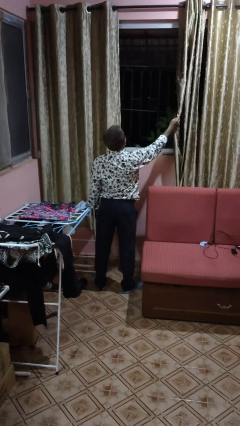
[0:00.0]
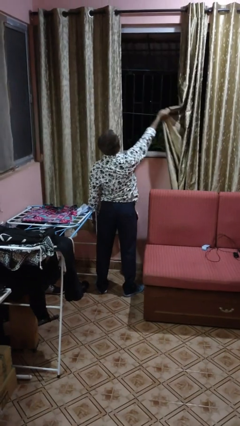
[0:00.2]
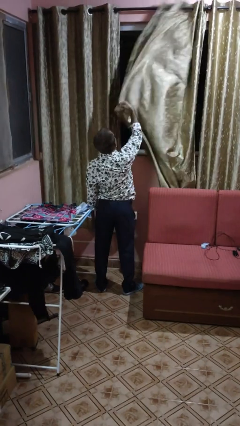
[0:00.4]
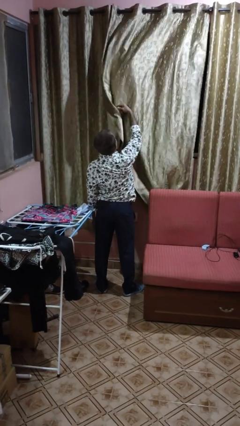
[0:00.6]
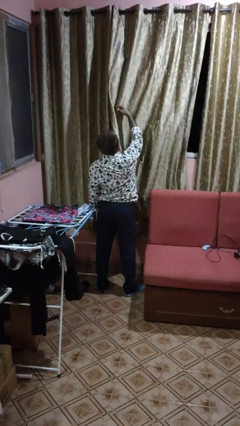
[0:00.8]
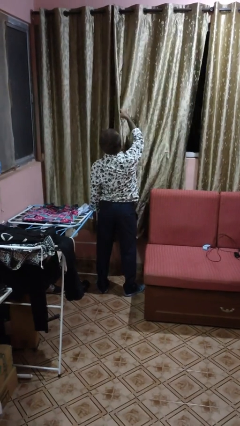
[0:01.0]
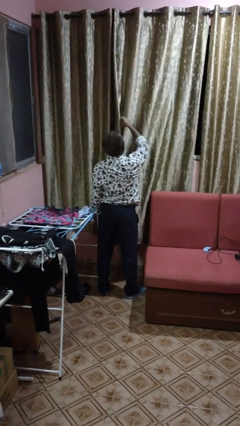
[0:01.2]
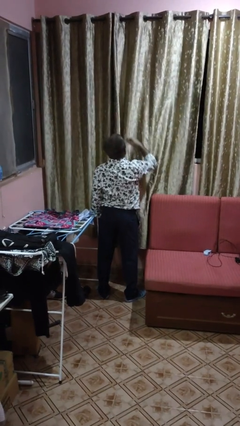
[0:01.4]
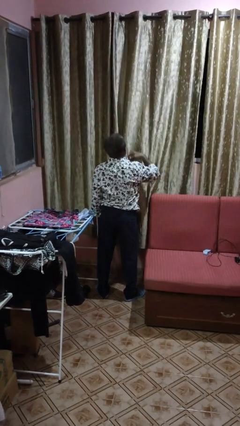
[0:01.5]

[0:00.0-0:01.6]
person closes curtains

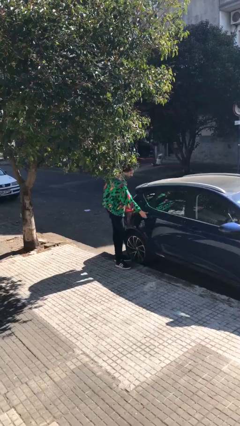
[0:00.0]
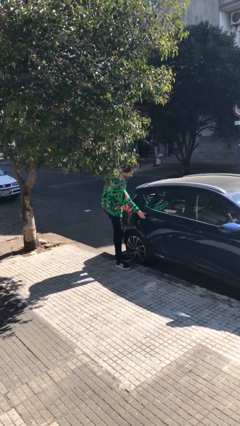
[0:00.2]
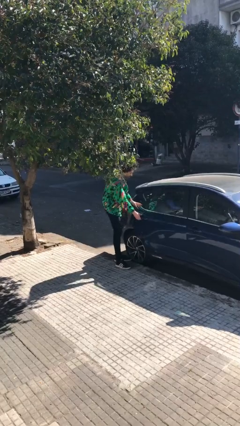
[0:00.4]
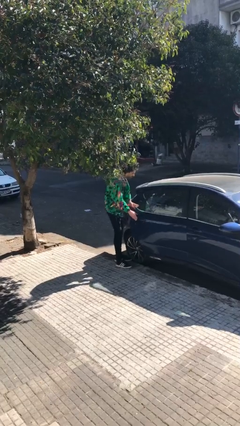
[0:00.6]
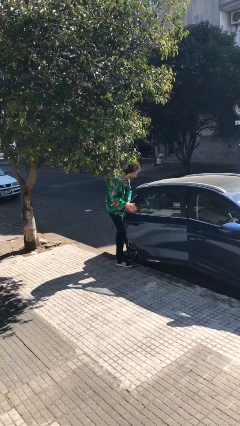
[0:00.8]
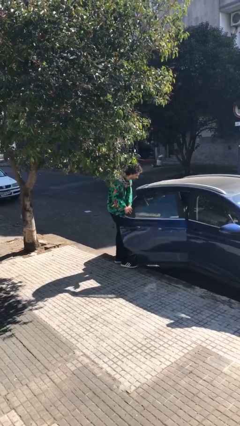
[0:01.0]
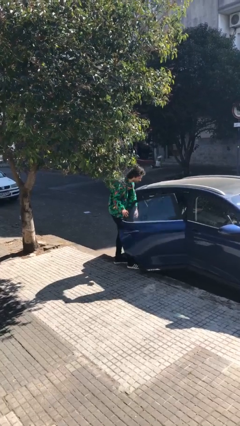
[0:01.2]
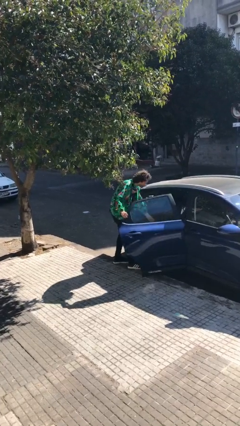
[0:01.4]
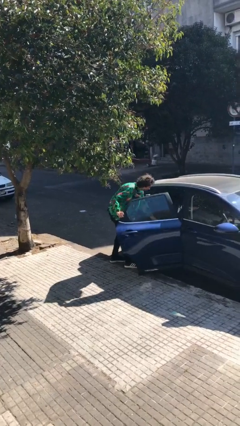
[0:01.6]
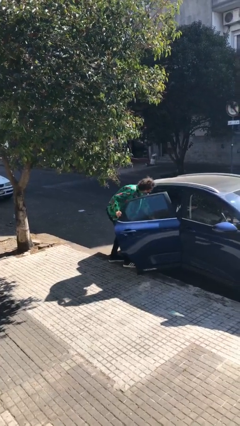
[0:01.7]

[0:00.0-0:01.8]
person opens car door

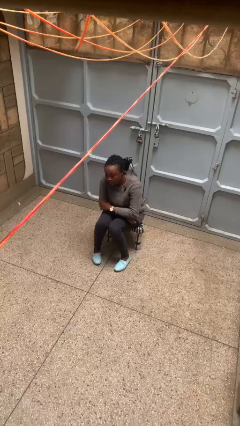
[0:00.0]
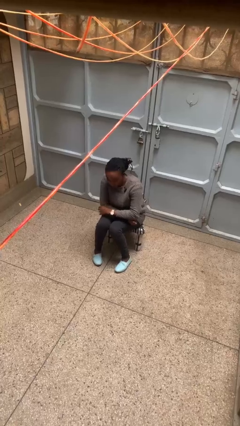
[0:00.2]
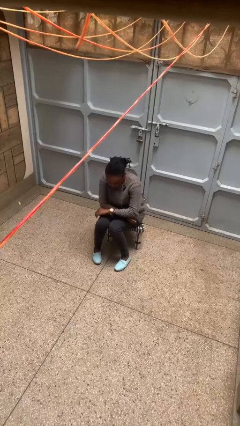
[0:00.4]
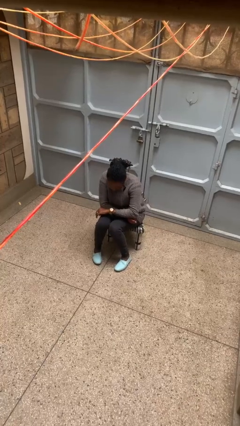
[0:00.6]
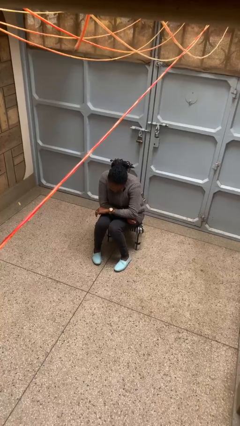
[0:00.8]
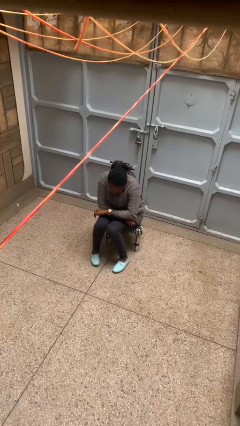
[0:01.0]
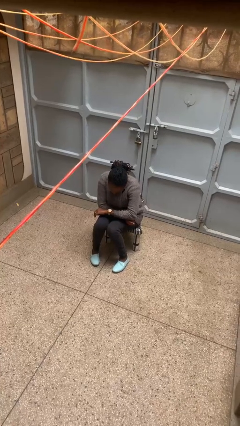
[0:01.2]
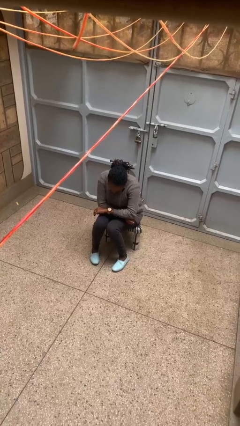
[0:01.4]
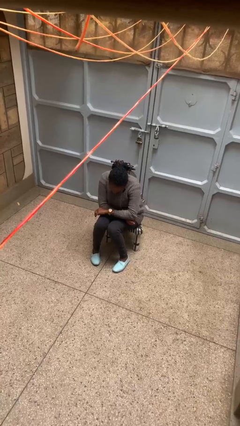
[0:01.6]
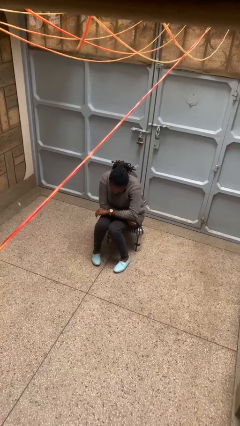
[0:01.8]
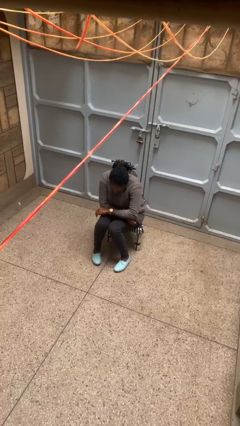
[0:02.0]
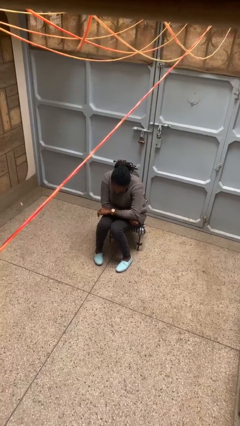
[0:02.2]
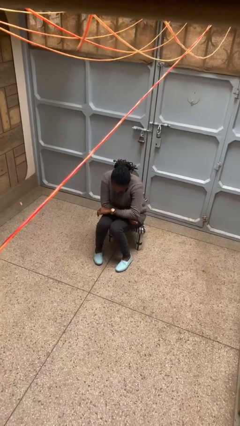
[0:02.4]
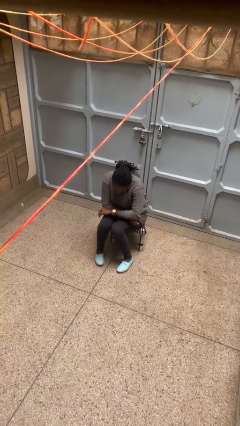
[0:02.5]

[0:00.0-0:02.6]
person looks at wristwatch

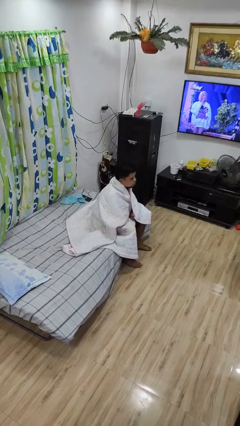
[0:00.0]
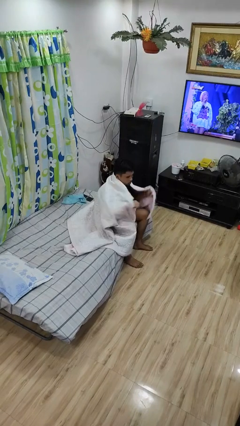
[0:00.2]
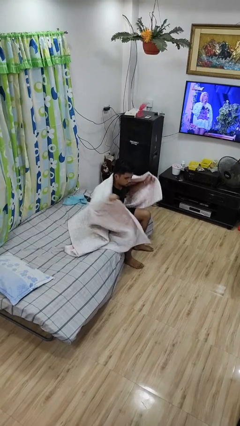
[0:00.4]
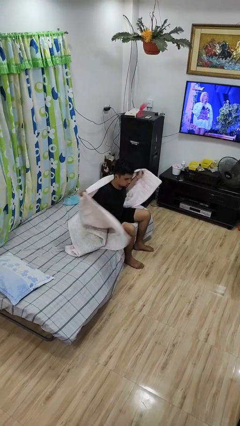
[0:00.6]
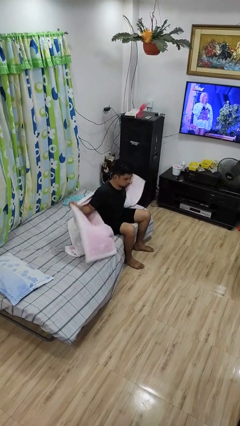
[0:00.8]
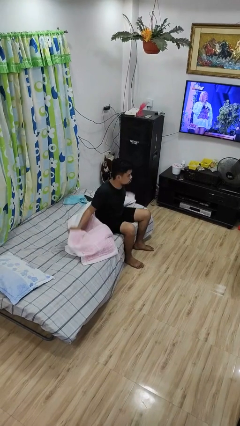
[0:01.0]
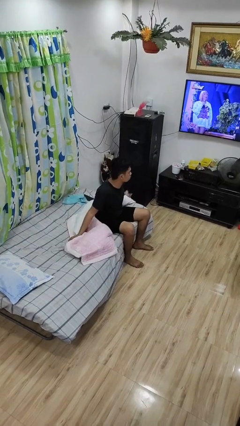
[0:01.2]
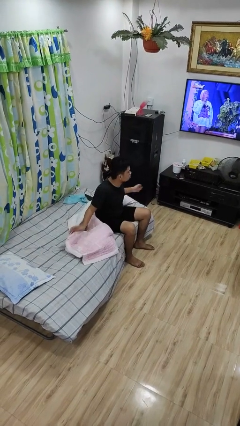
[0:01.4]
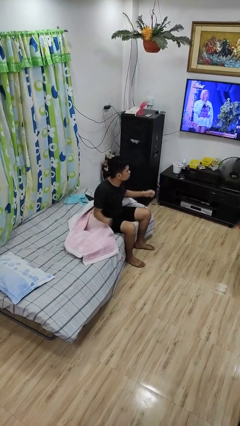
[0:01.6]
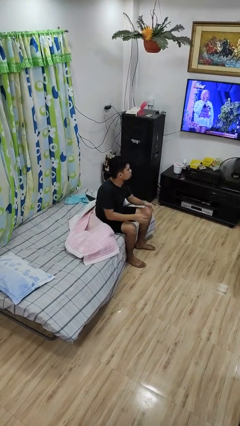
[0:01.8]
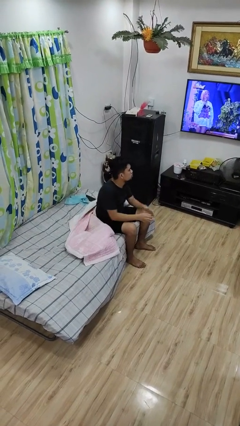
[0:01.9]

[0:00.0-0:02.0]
person uncovers with bedsheets

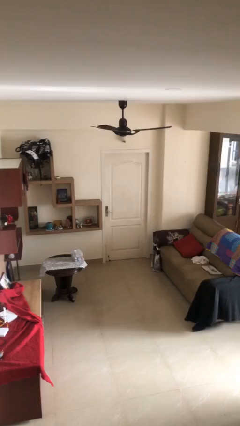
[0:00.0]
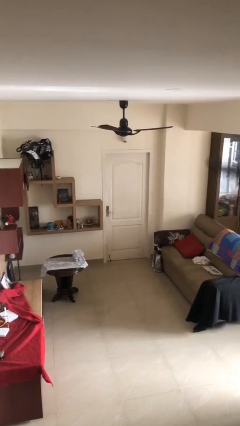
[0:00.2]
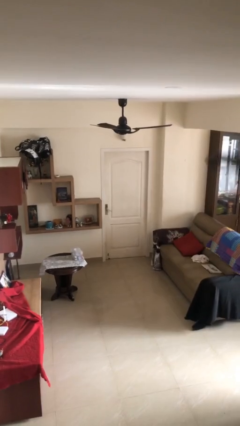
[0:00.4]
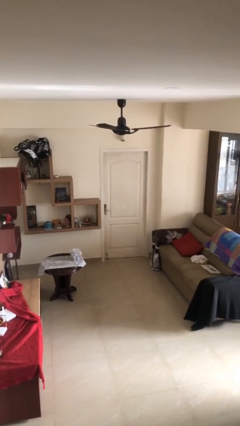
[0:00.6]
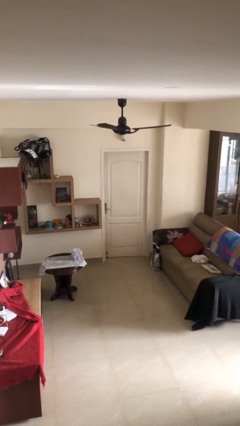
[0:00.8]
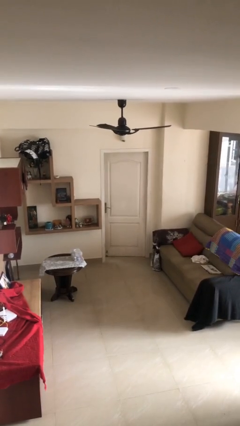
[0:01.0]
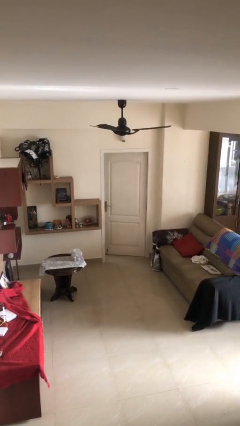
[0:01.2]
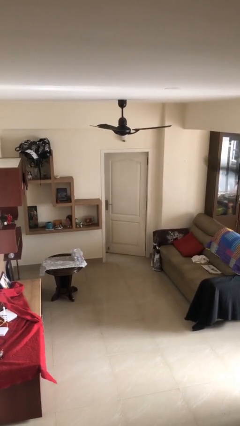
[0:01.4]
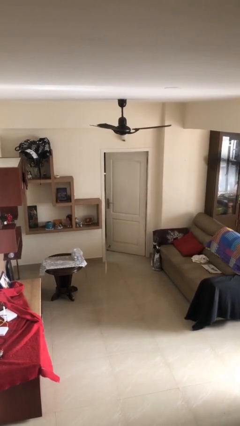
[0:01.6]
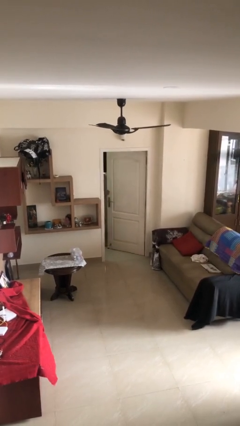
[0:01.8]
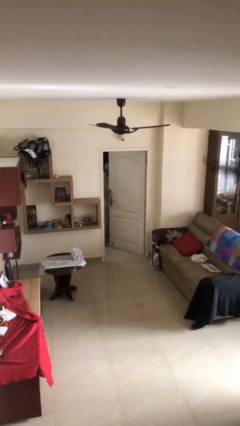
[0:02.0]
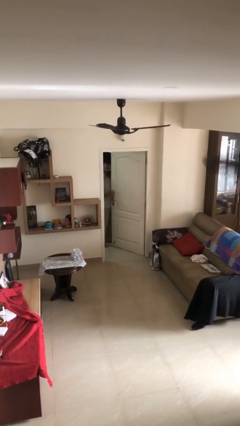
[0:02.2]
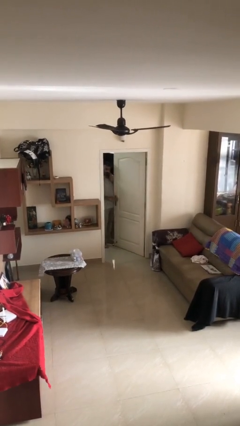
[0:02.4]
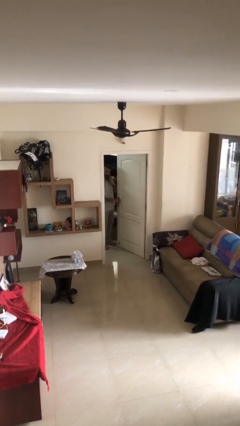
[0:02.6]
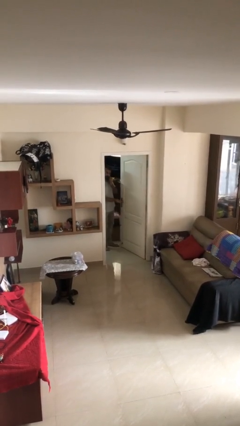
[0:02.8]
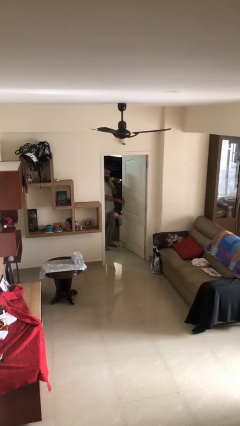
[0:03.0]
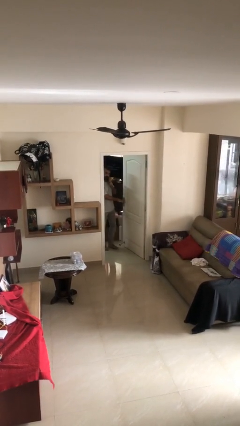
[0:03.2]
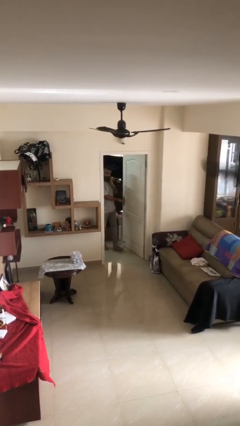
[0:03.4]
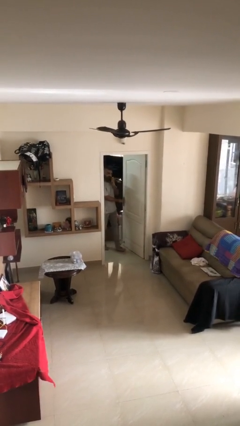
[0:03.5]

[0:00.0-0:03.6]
person opens facility door

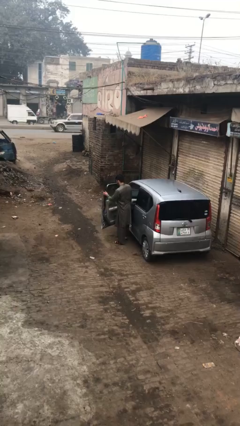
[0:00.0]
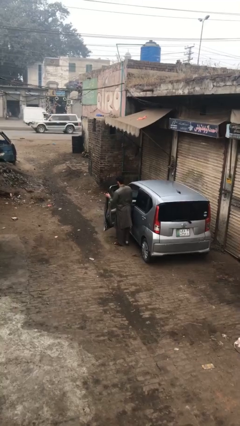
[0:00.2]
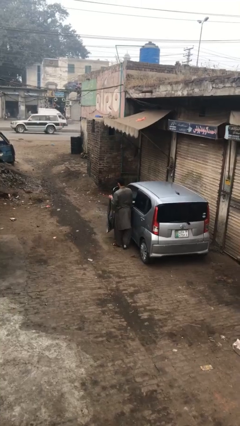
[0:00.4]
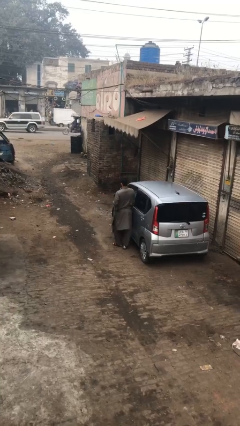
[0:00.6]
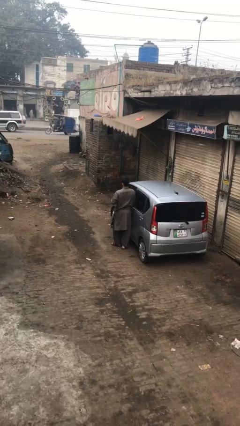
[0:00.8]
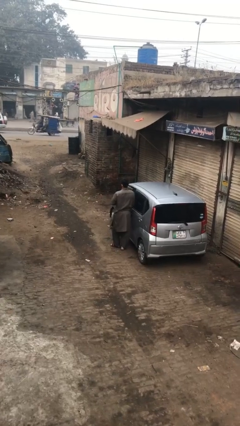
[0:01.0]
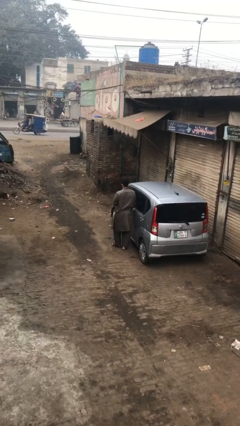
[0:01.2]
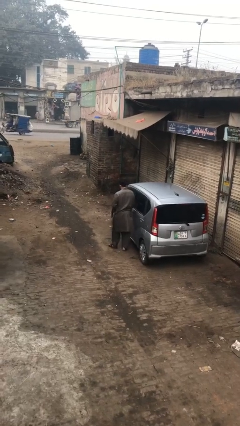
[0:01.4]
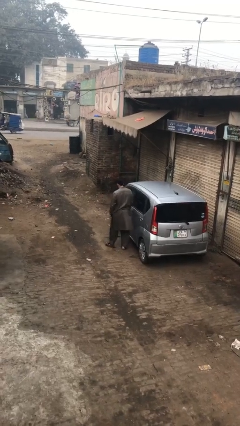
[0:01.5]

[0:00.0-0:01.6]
person closes car door

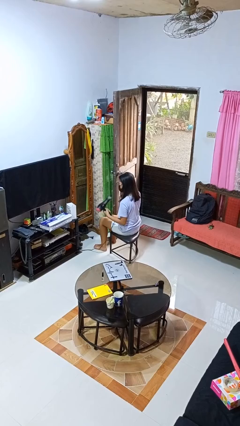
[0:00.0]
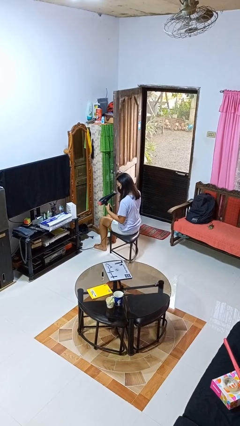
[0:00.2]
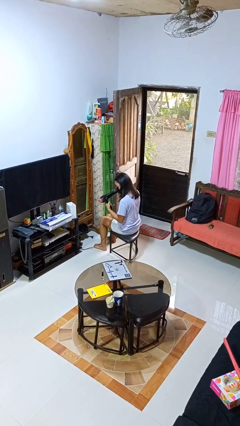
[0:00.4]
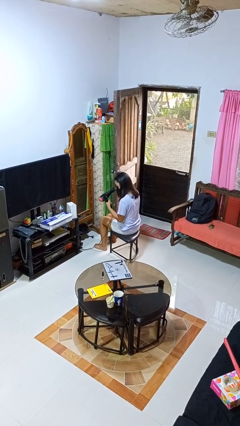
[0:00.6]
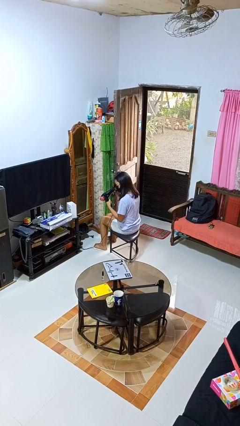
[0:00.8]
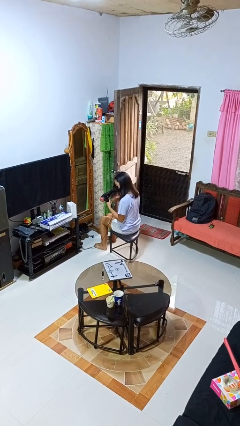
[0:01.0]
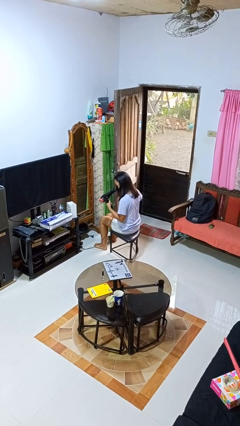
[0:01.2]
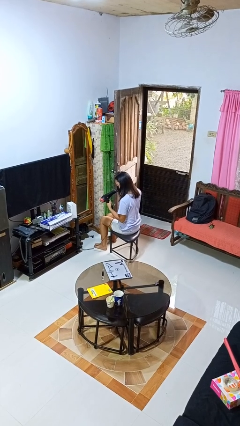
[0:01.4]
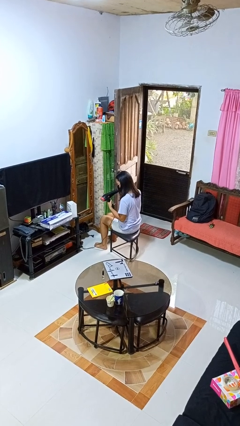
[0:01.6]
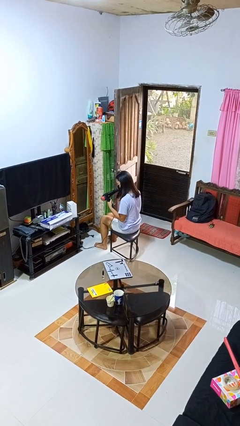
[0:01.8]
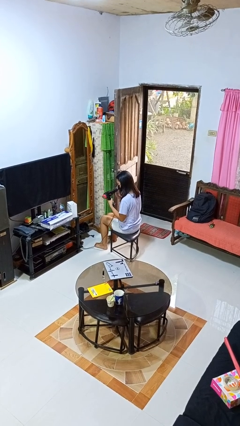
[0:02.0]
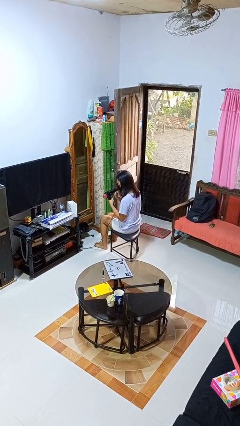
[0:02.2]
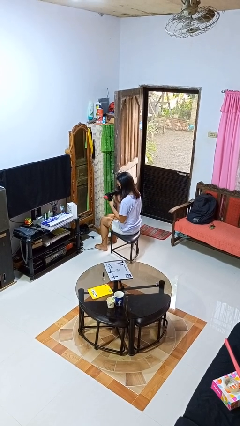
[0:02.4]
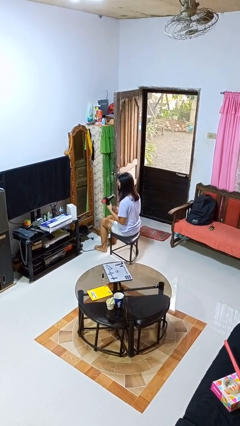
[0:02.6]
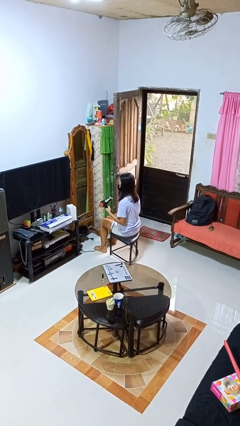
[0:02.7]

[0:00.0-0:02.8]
person dries hair with hairdryer

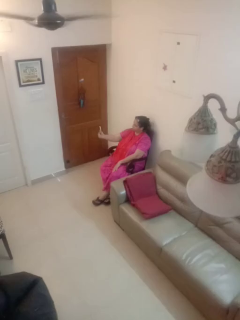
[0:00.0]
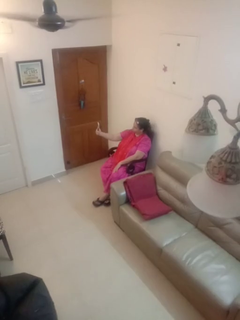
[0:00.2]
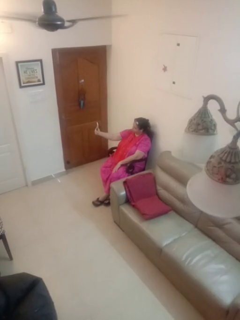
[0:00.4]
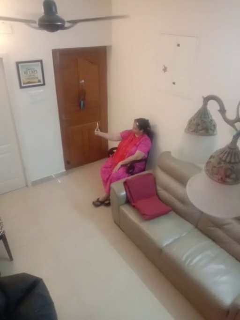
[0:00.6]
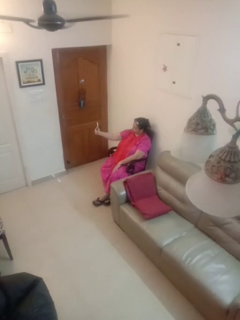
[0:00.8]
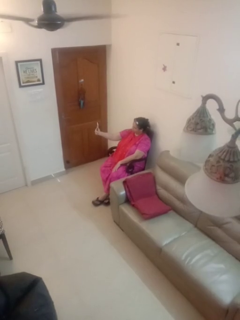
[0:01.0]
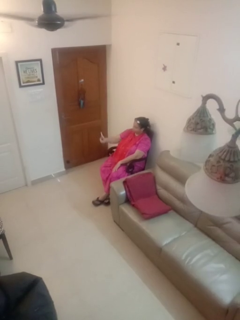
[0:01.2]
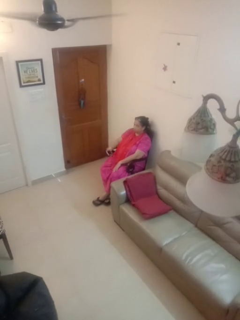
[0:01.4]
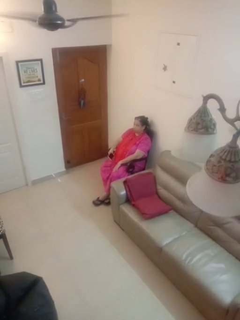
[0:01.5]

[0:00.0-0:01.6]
person takes selfie
